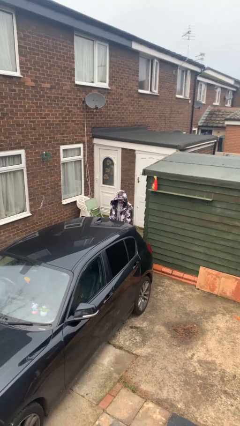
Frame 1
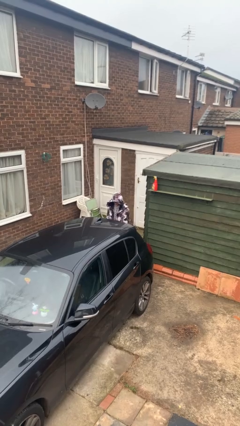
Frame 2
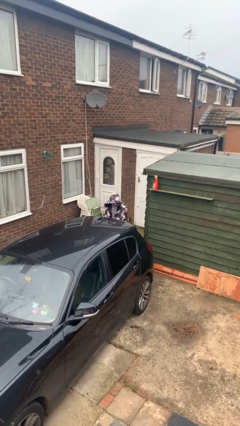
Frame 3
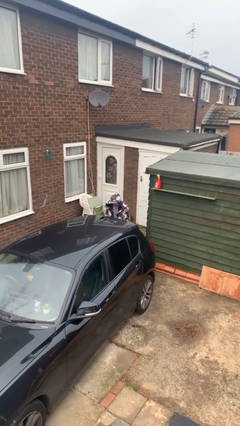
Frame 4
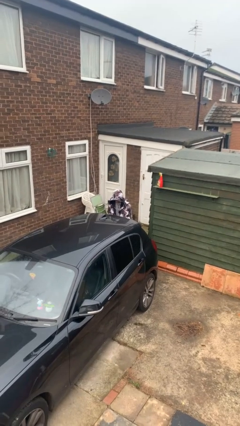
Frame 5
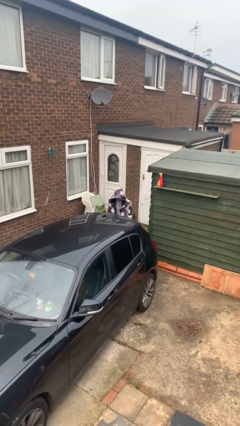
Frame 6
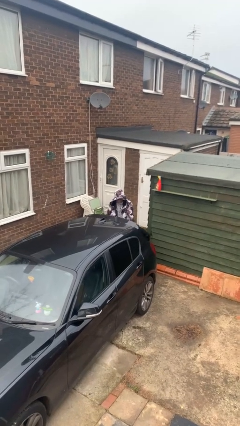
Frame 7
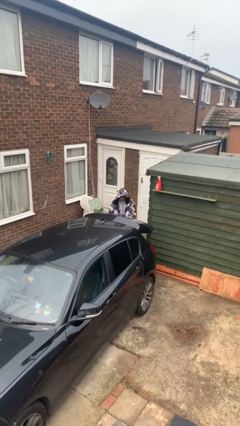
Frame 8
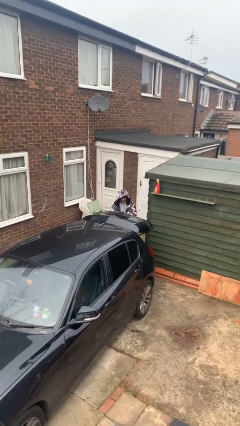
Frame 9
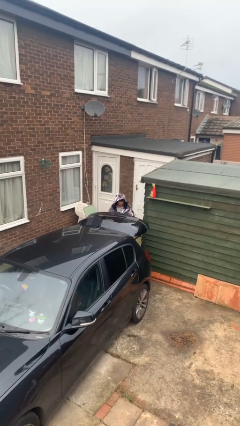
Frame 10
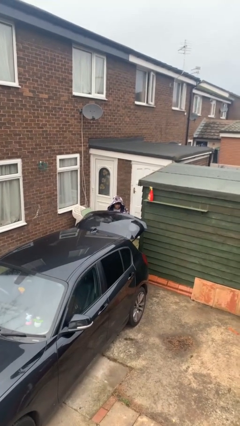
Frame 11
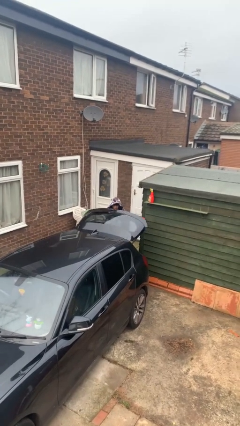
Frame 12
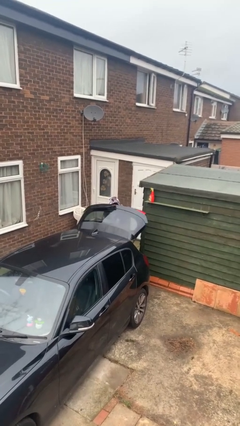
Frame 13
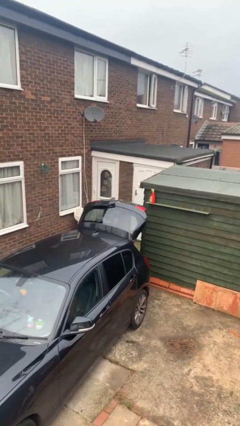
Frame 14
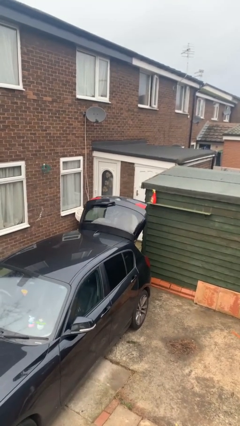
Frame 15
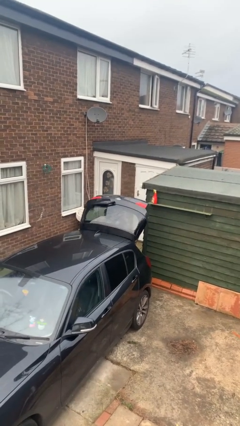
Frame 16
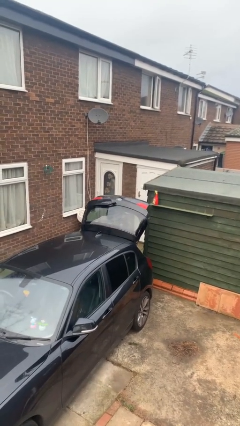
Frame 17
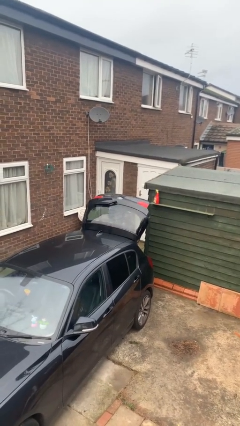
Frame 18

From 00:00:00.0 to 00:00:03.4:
person opens car trunk

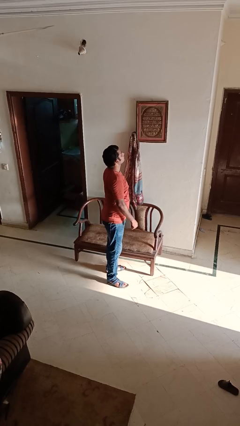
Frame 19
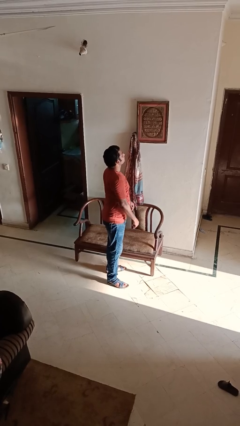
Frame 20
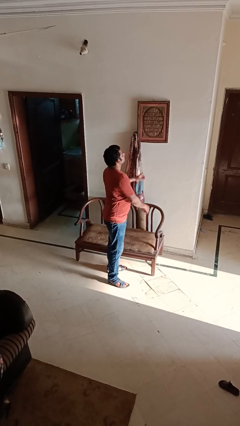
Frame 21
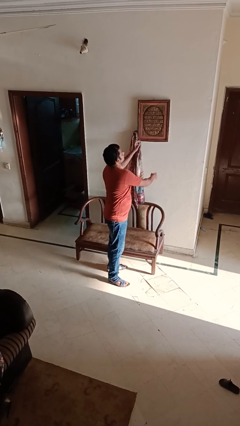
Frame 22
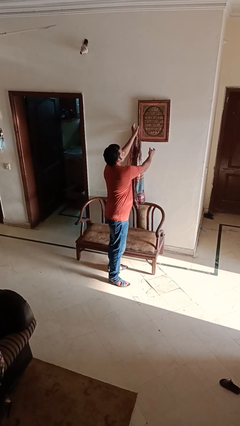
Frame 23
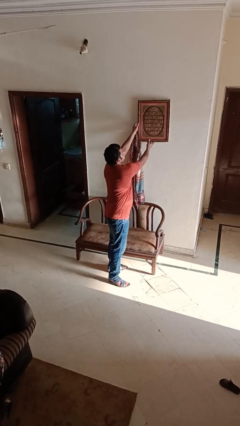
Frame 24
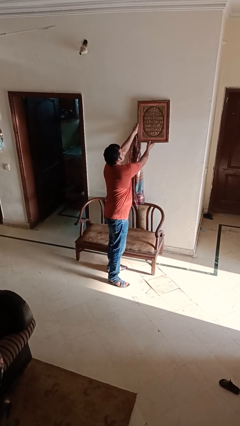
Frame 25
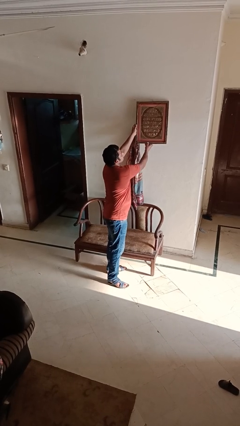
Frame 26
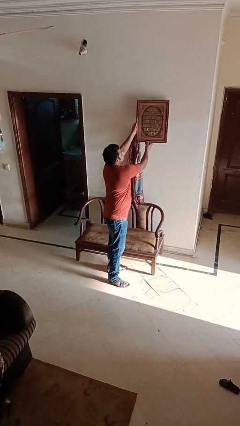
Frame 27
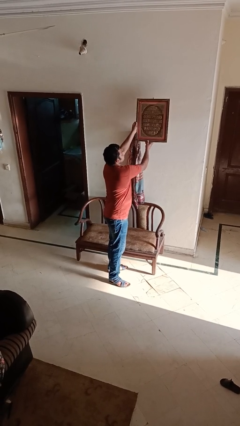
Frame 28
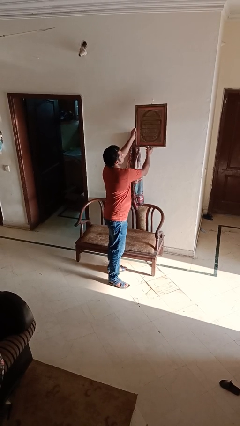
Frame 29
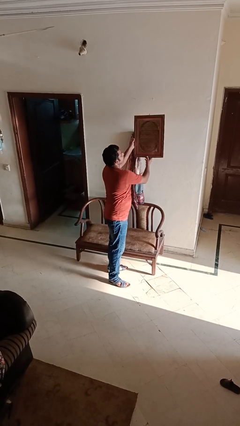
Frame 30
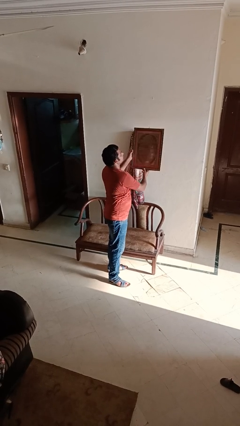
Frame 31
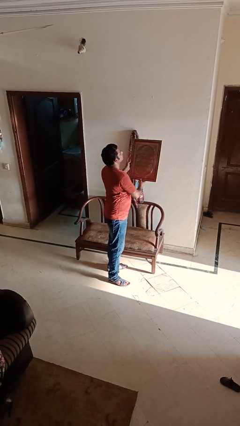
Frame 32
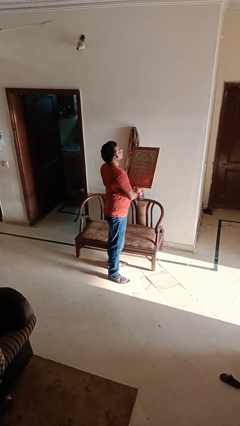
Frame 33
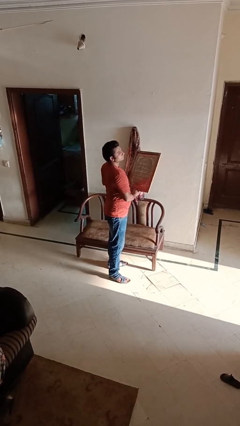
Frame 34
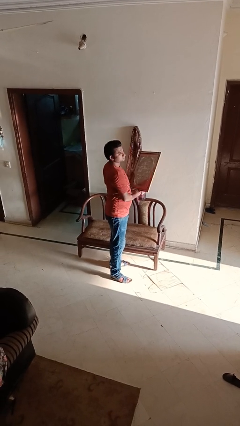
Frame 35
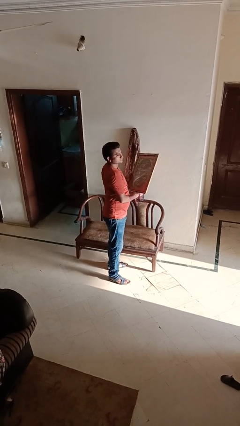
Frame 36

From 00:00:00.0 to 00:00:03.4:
person takes down picture frame

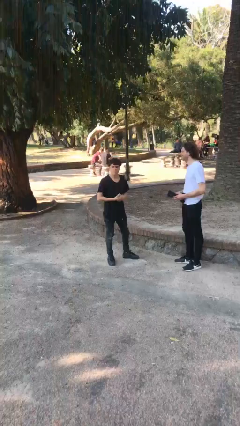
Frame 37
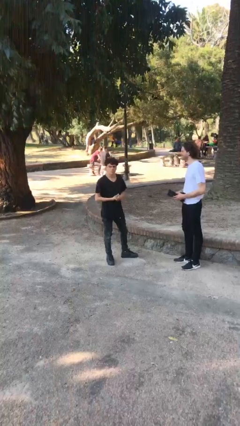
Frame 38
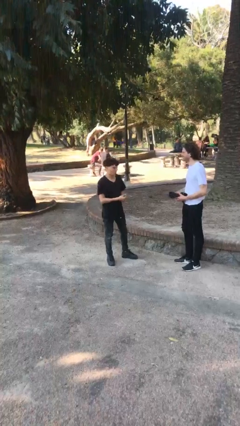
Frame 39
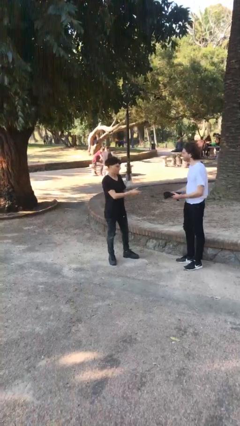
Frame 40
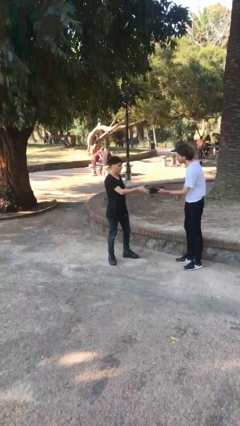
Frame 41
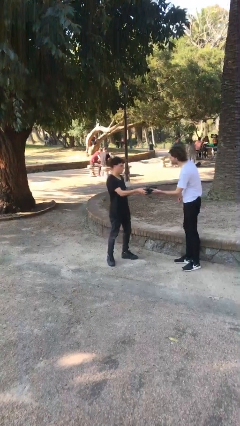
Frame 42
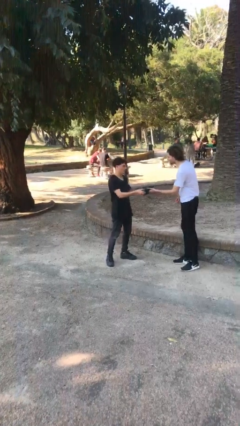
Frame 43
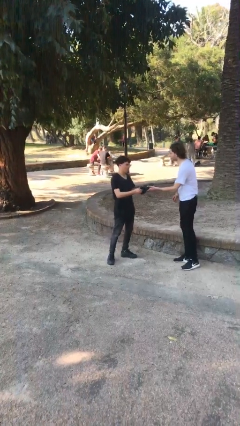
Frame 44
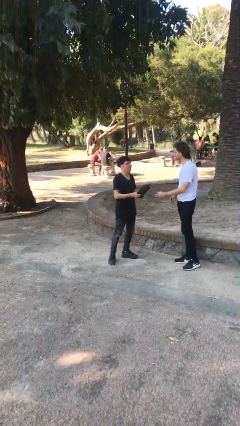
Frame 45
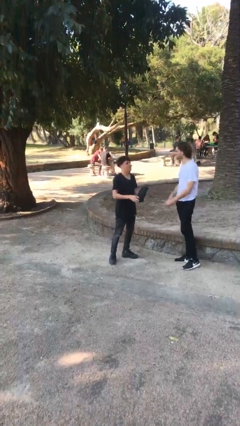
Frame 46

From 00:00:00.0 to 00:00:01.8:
person transfers object to person

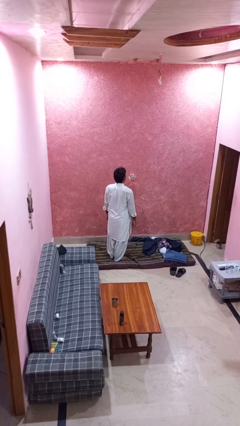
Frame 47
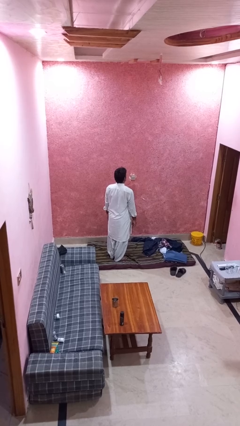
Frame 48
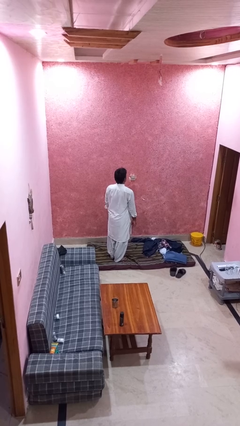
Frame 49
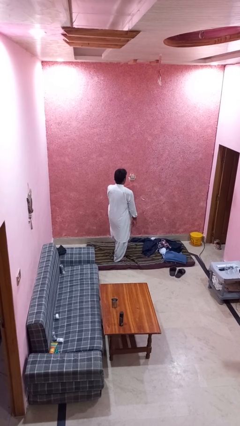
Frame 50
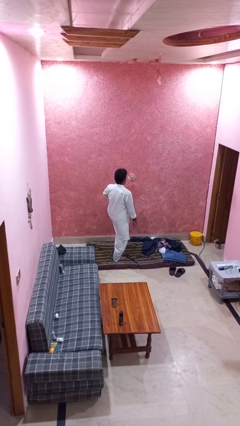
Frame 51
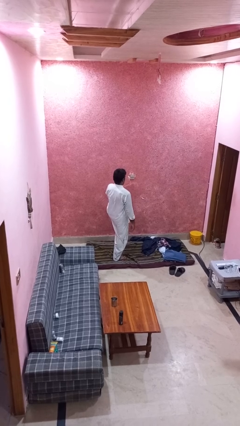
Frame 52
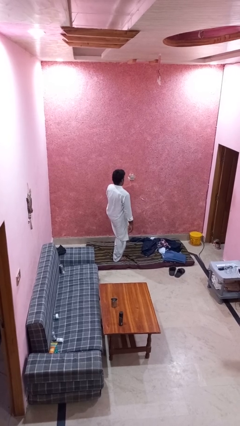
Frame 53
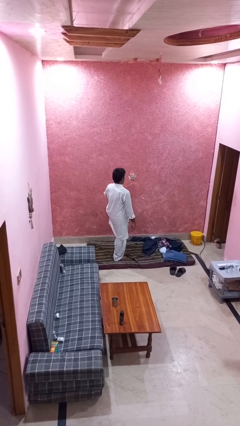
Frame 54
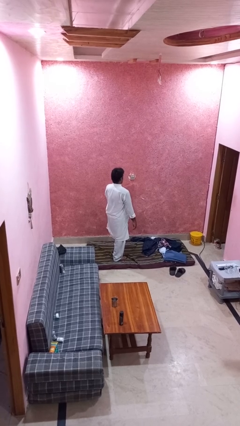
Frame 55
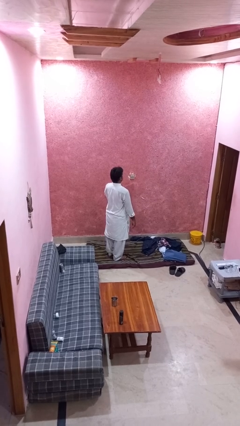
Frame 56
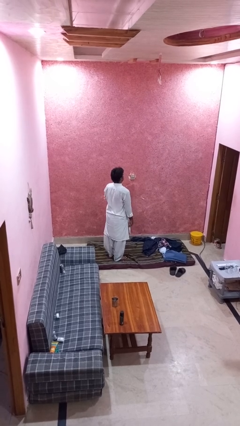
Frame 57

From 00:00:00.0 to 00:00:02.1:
person slaps hands on thighs

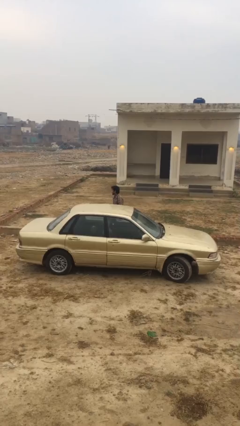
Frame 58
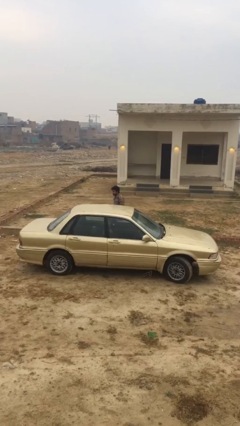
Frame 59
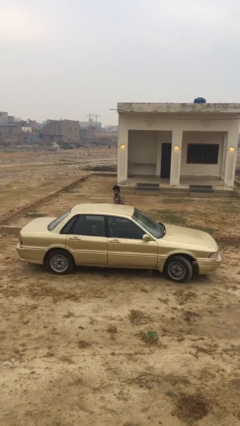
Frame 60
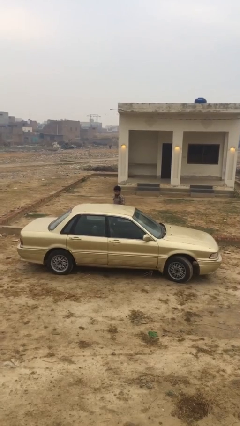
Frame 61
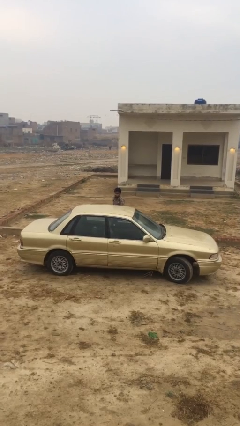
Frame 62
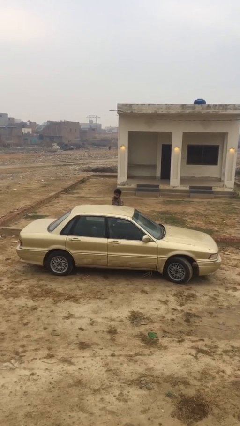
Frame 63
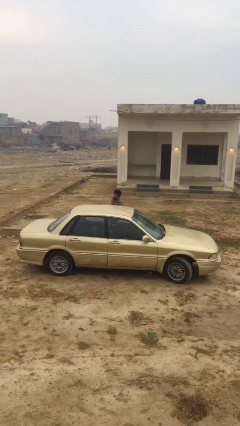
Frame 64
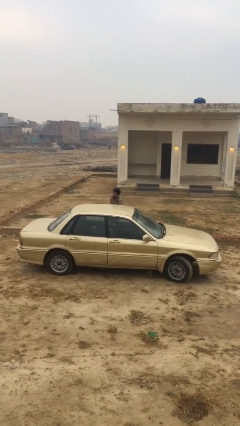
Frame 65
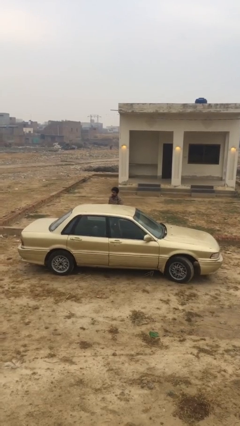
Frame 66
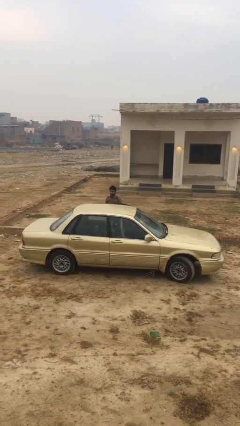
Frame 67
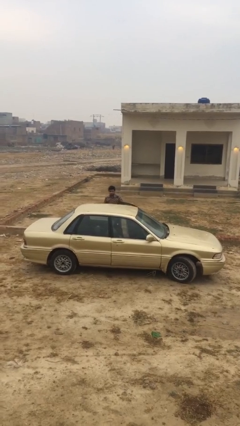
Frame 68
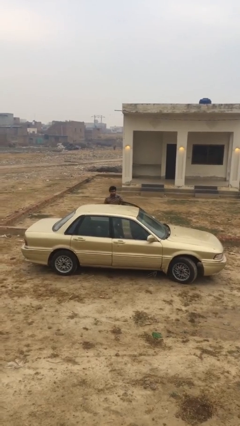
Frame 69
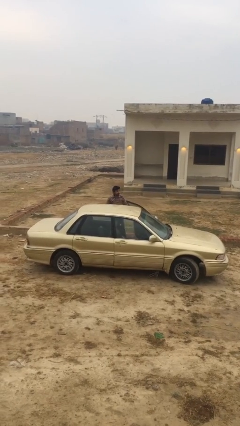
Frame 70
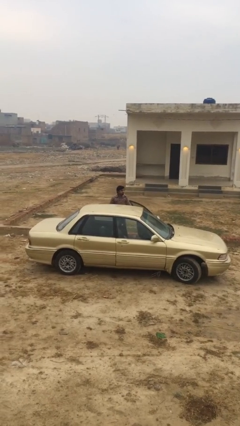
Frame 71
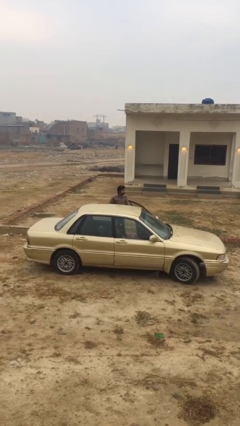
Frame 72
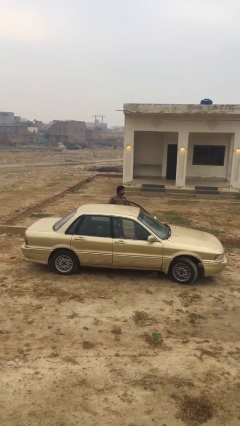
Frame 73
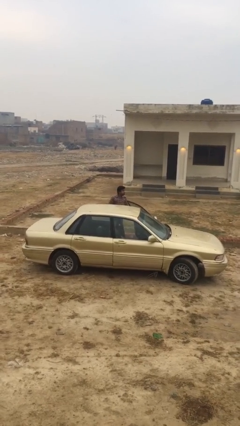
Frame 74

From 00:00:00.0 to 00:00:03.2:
person opens car door

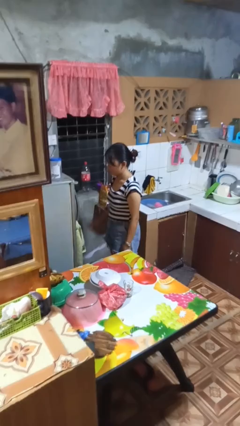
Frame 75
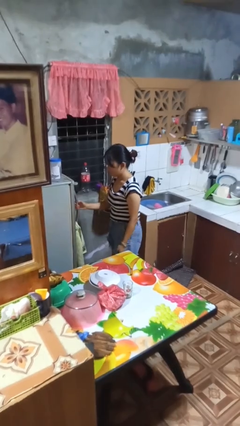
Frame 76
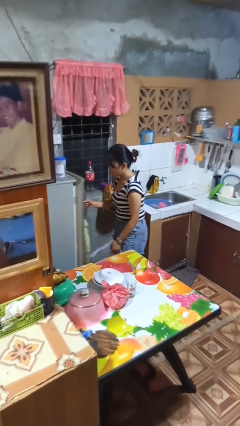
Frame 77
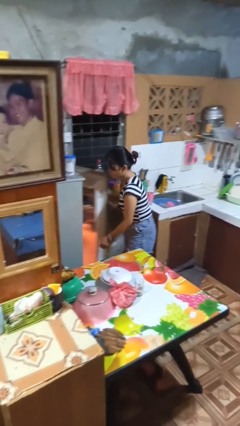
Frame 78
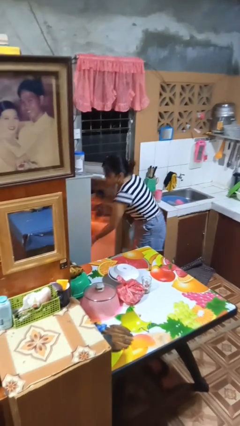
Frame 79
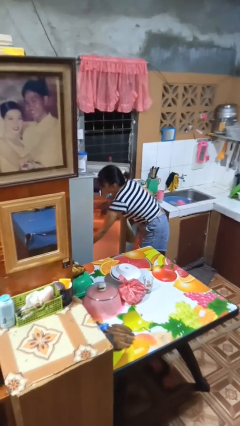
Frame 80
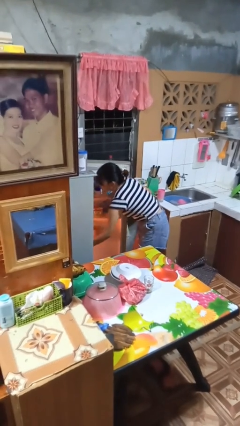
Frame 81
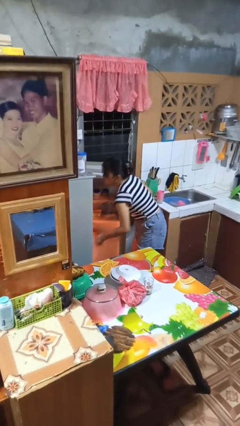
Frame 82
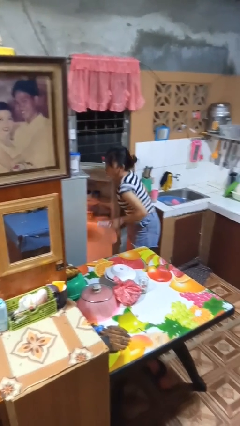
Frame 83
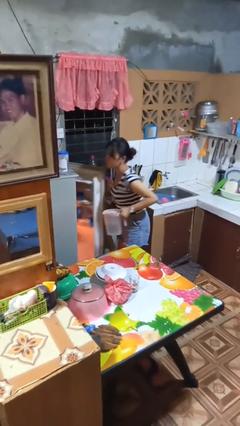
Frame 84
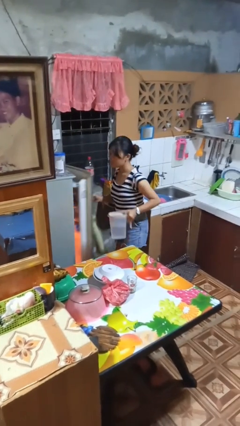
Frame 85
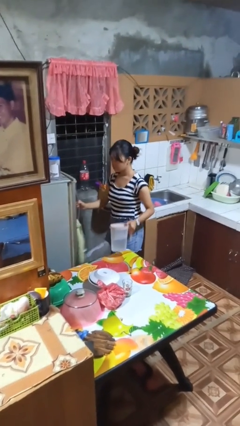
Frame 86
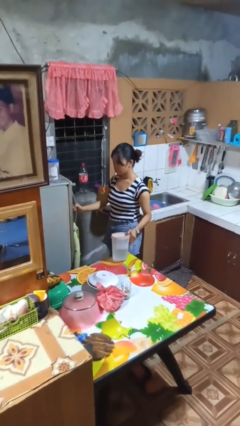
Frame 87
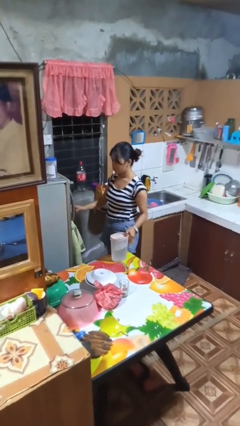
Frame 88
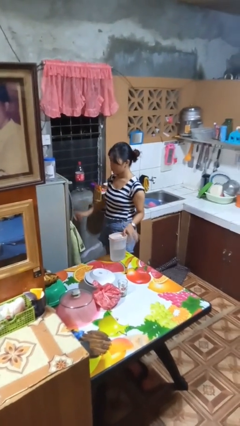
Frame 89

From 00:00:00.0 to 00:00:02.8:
person takes object from refrigerator

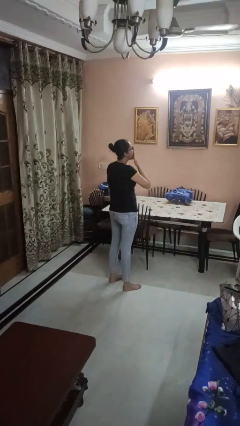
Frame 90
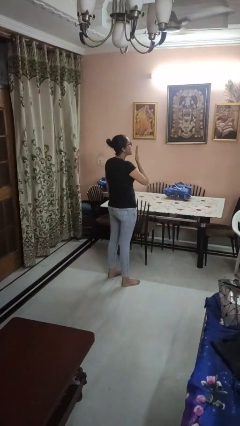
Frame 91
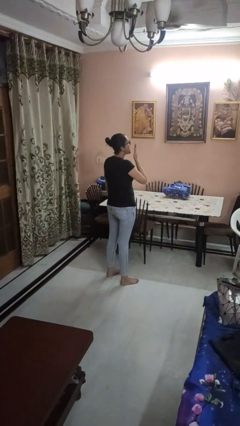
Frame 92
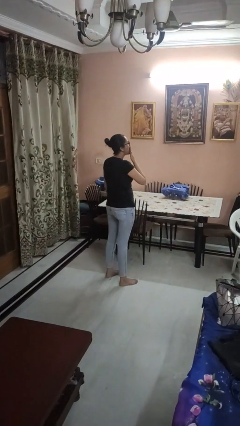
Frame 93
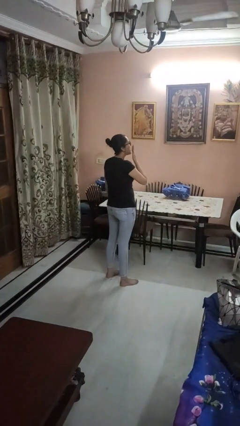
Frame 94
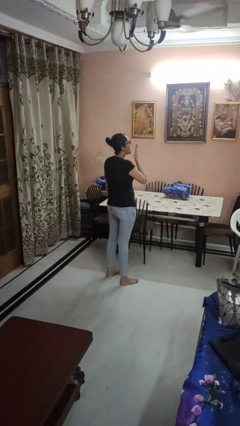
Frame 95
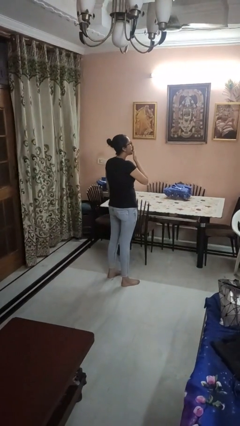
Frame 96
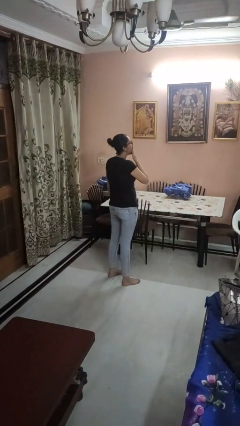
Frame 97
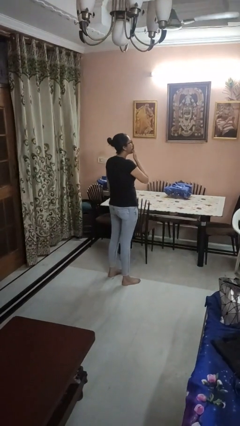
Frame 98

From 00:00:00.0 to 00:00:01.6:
person yawns
